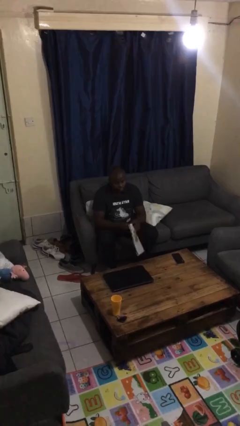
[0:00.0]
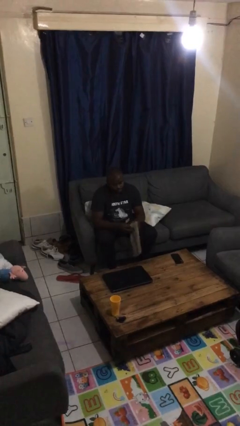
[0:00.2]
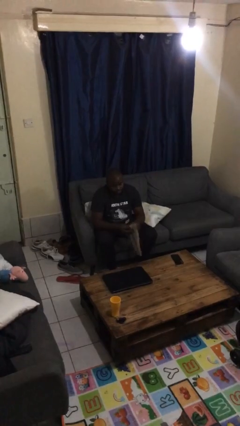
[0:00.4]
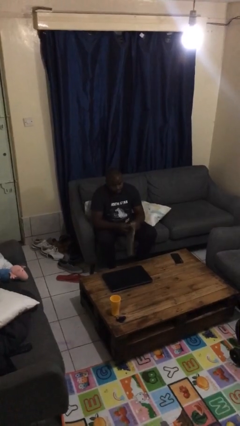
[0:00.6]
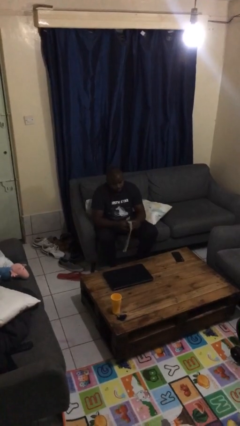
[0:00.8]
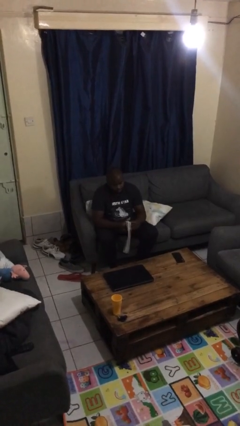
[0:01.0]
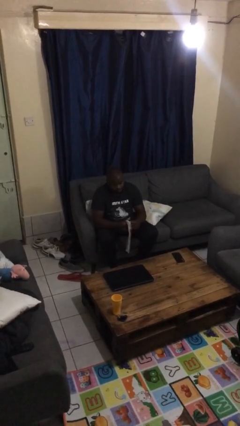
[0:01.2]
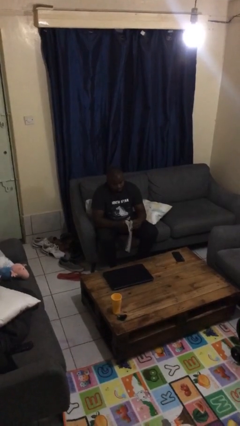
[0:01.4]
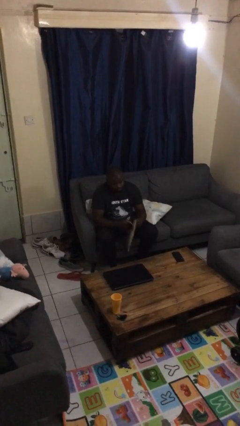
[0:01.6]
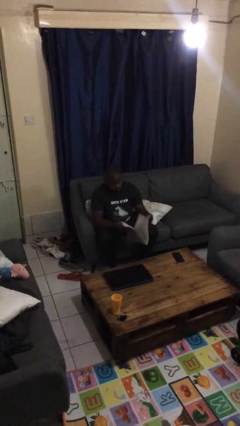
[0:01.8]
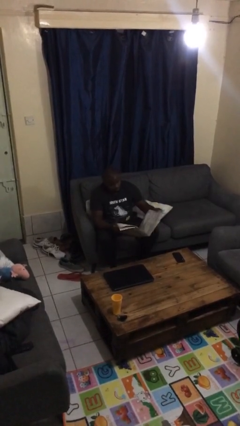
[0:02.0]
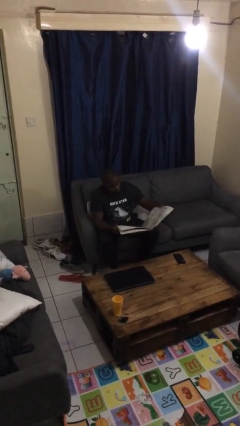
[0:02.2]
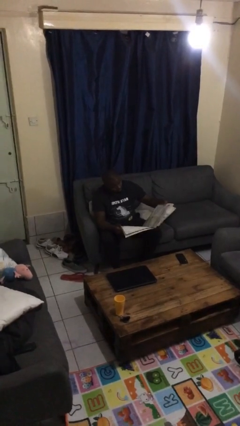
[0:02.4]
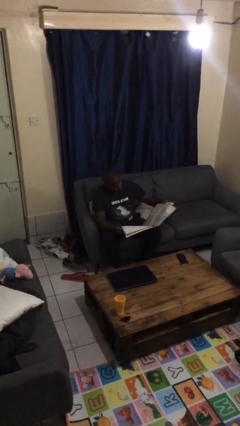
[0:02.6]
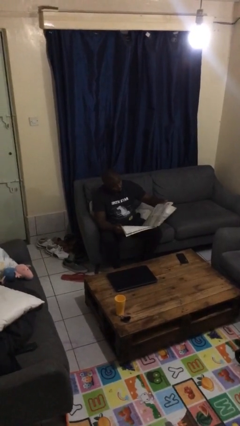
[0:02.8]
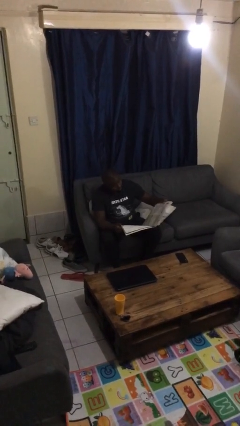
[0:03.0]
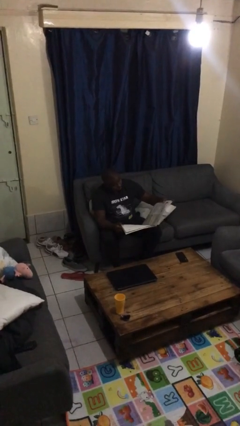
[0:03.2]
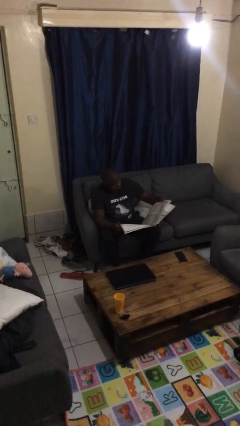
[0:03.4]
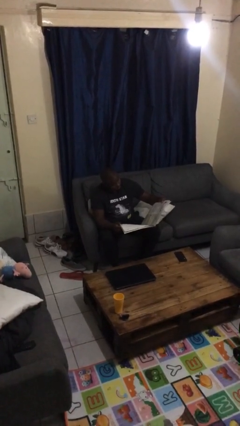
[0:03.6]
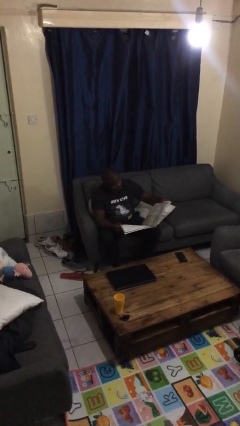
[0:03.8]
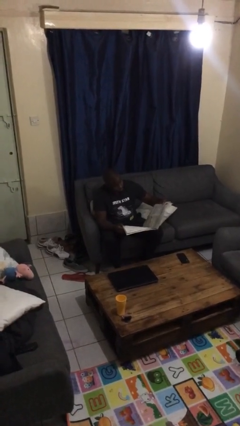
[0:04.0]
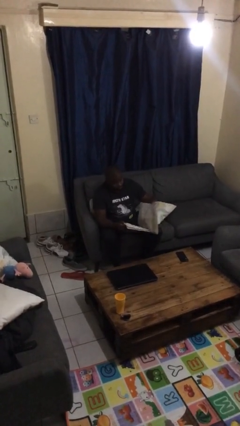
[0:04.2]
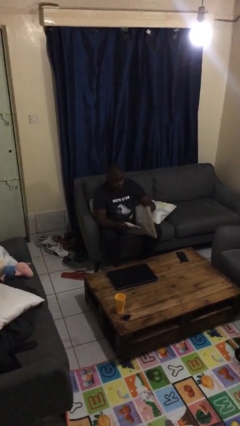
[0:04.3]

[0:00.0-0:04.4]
person reads newspaper

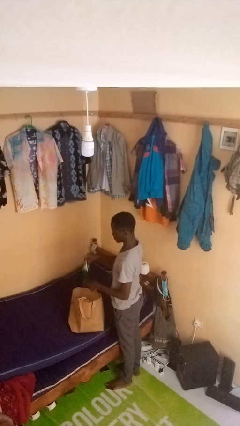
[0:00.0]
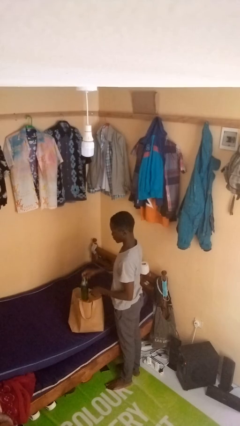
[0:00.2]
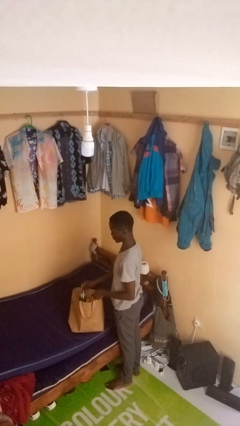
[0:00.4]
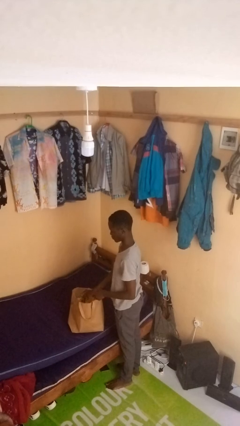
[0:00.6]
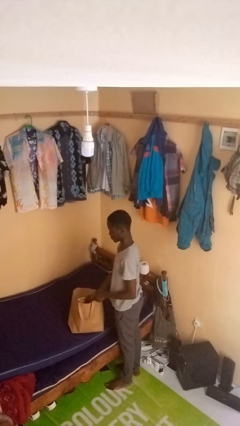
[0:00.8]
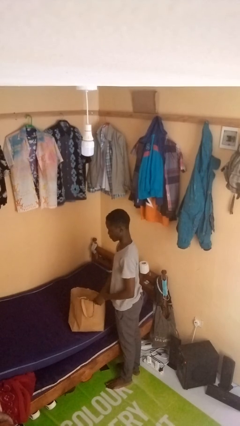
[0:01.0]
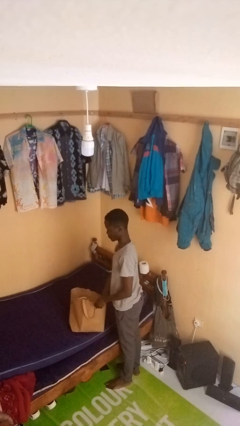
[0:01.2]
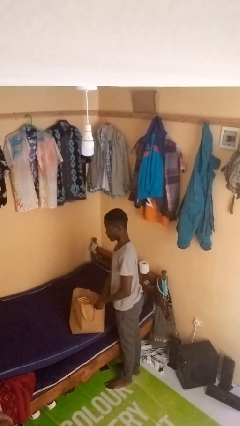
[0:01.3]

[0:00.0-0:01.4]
person puts object into bag

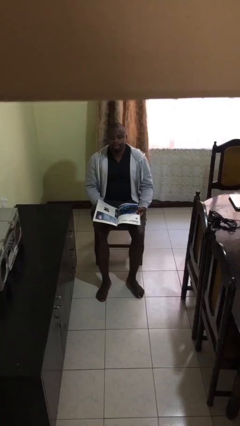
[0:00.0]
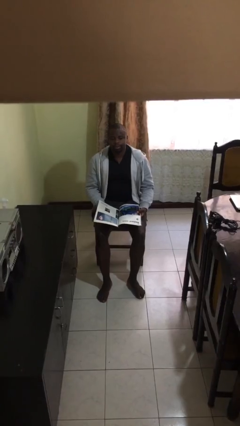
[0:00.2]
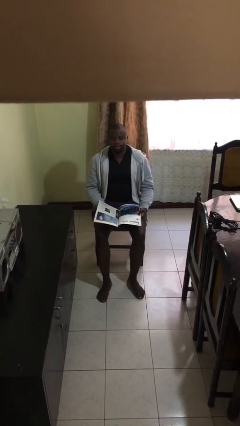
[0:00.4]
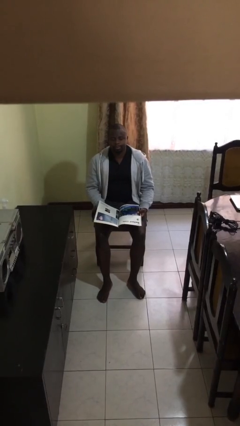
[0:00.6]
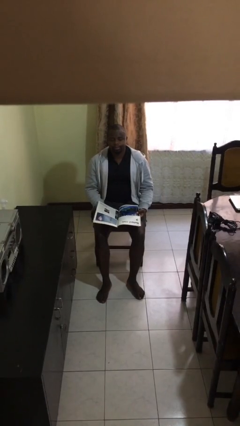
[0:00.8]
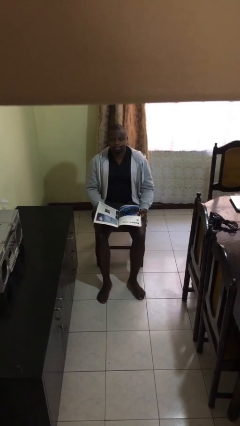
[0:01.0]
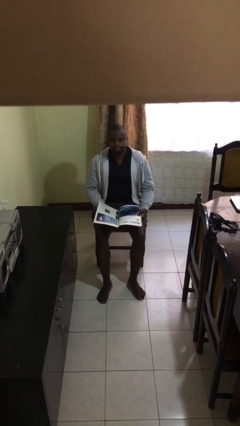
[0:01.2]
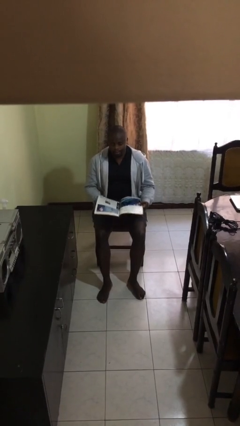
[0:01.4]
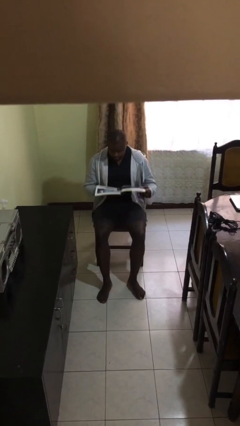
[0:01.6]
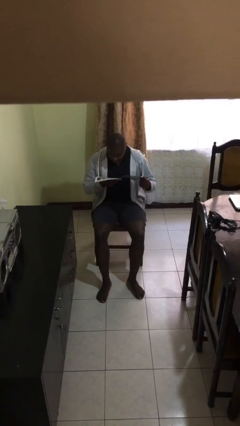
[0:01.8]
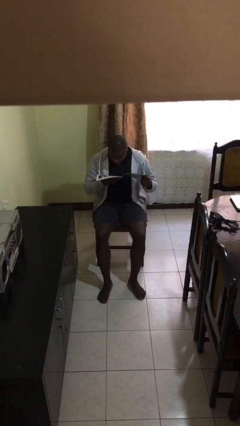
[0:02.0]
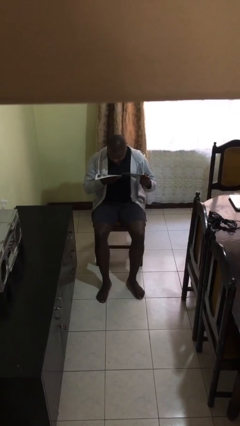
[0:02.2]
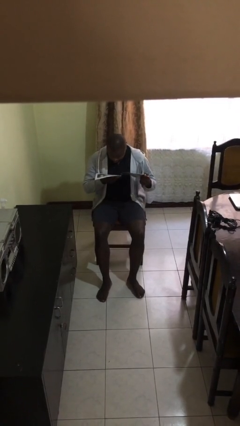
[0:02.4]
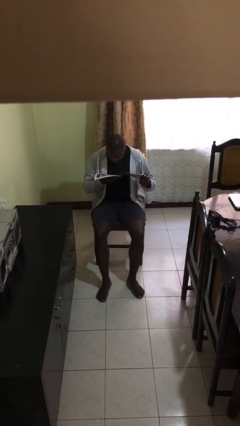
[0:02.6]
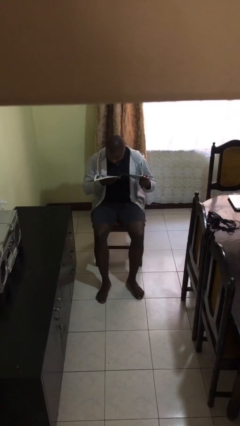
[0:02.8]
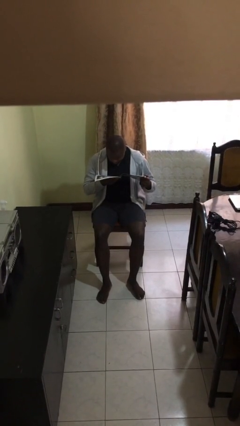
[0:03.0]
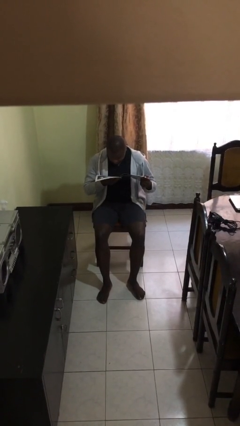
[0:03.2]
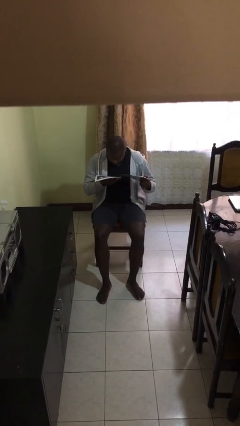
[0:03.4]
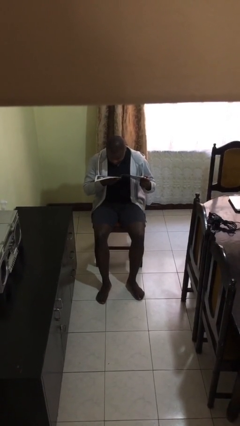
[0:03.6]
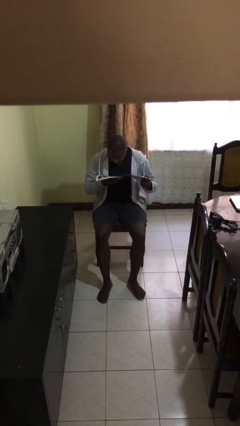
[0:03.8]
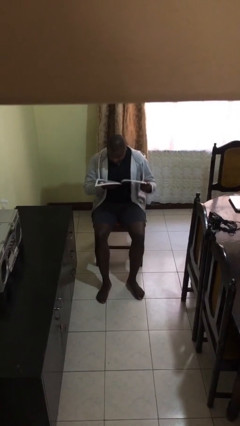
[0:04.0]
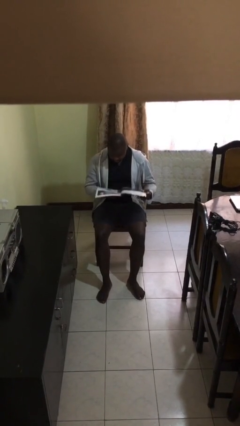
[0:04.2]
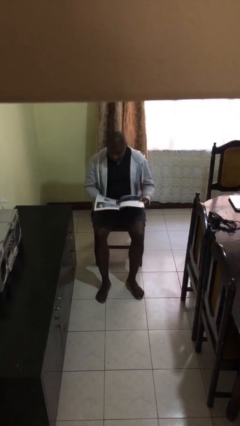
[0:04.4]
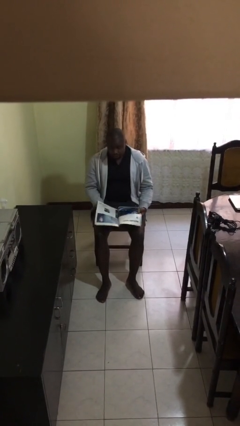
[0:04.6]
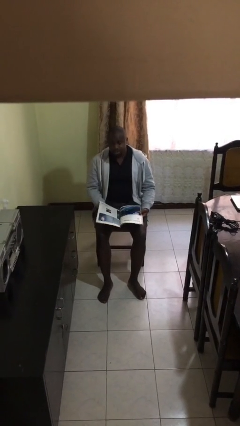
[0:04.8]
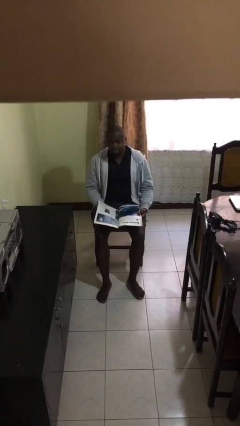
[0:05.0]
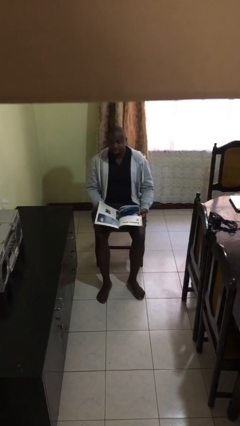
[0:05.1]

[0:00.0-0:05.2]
person reads document

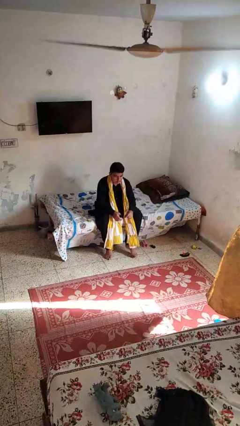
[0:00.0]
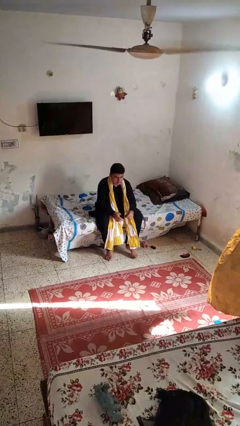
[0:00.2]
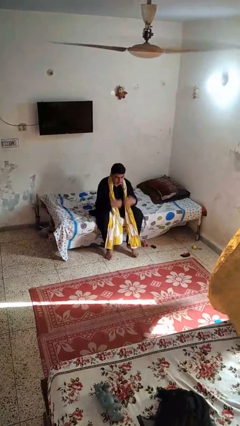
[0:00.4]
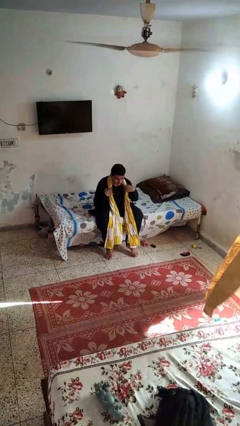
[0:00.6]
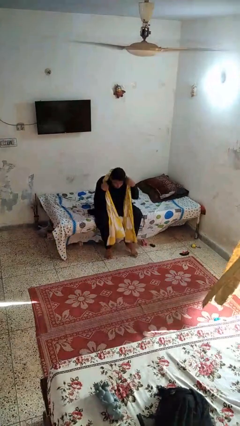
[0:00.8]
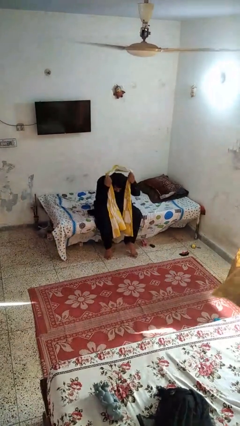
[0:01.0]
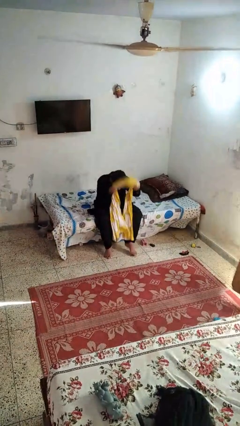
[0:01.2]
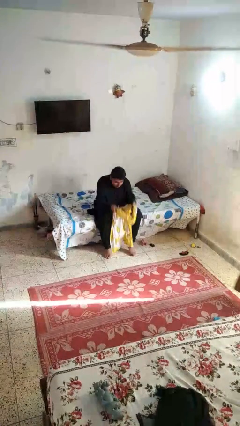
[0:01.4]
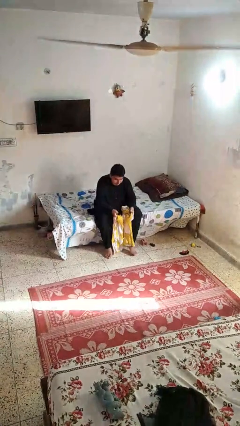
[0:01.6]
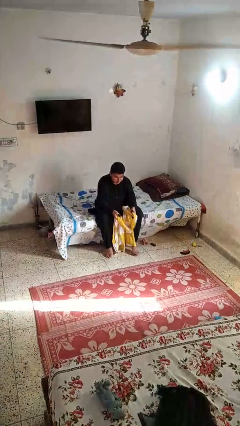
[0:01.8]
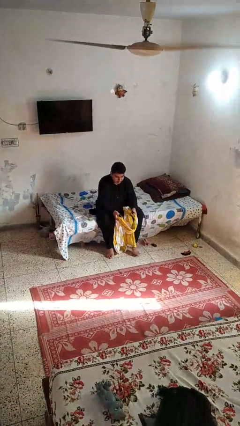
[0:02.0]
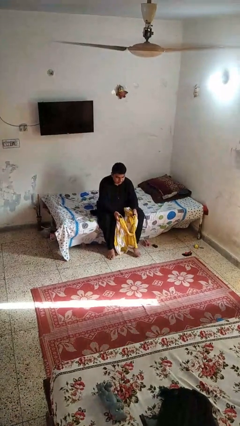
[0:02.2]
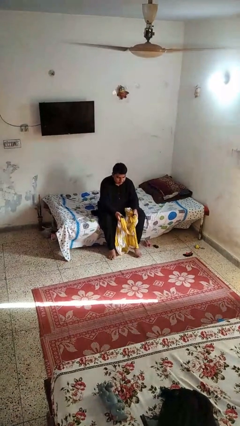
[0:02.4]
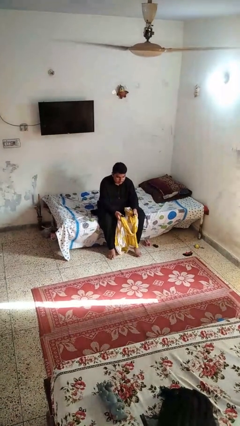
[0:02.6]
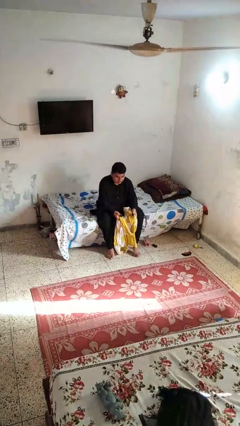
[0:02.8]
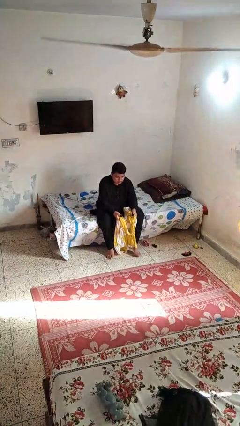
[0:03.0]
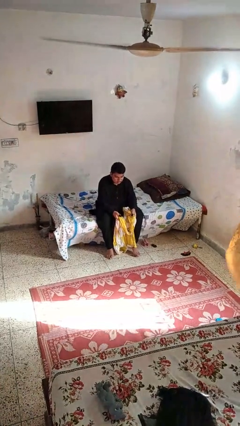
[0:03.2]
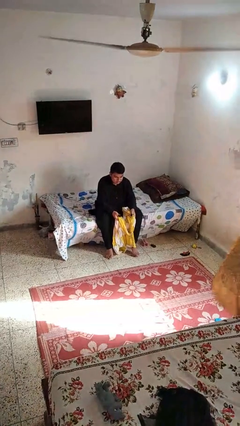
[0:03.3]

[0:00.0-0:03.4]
person takes off scarf

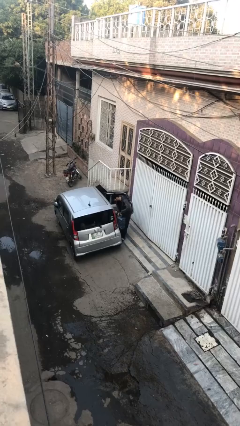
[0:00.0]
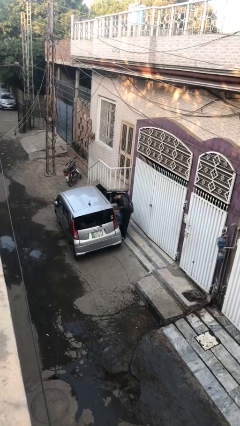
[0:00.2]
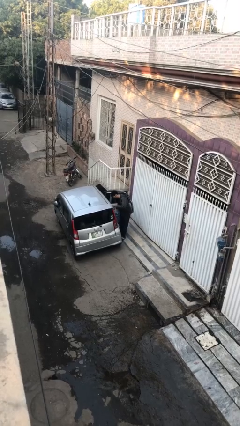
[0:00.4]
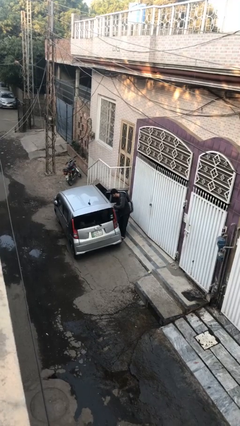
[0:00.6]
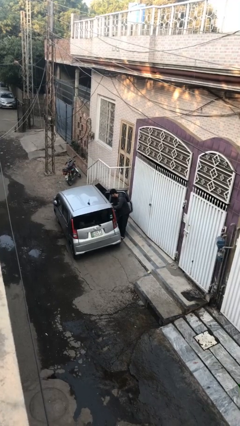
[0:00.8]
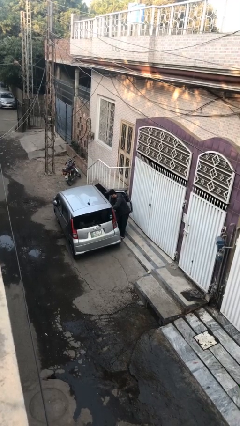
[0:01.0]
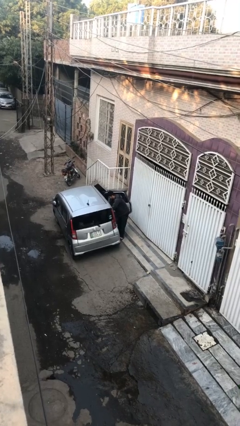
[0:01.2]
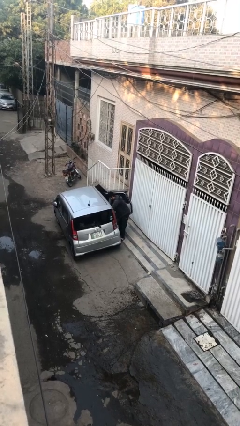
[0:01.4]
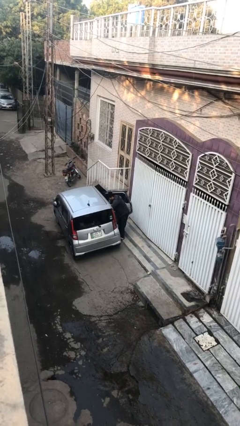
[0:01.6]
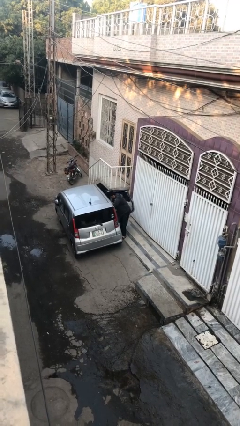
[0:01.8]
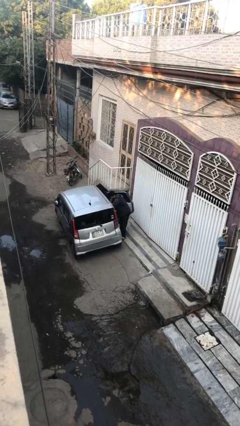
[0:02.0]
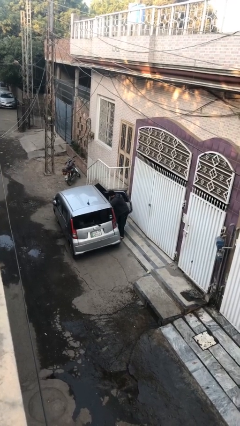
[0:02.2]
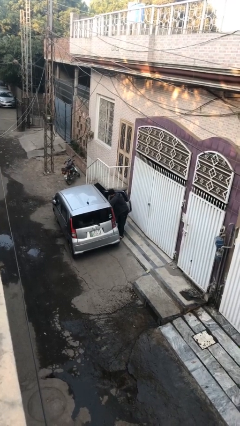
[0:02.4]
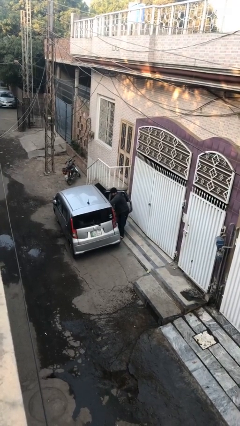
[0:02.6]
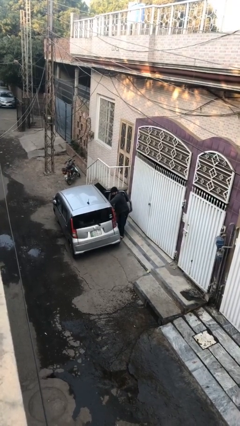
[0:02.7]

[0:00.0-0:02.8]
person loads car

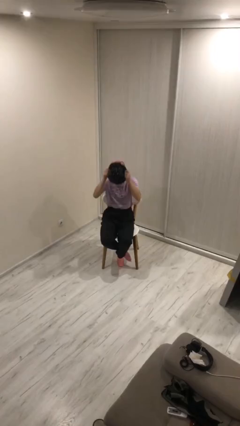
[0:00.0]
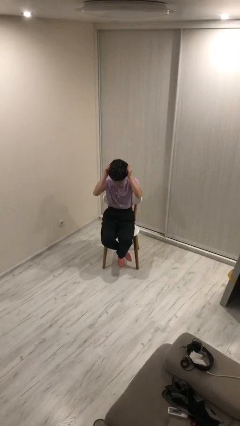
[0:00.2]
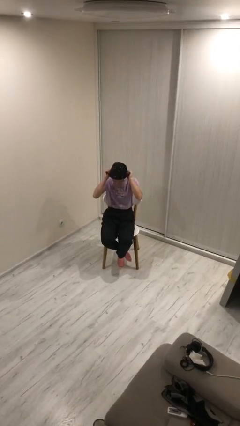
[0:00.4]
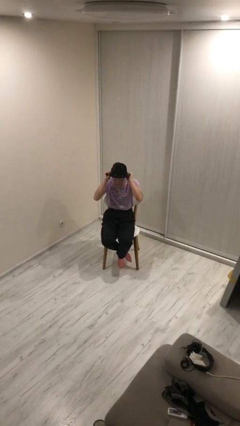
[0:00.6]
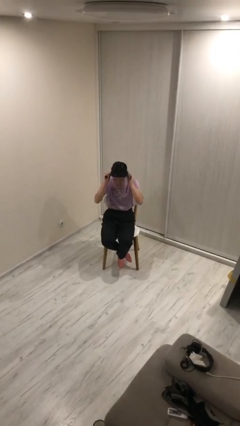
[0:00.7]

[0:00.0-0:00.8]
person puts on hat
